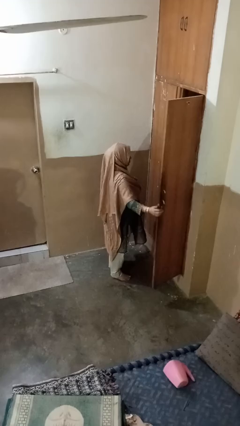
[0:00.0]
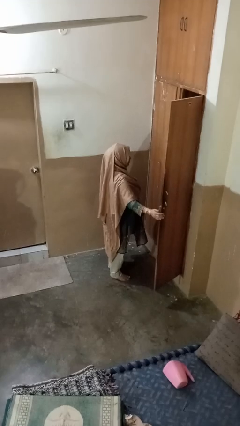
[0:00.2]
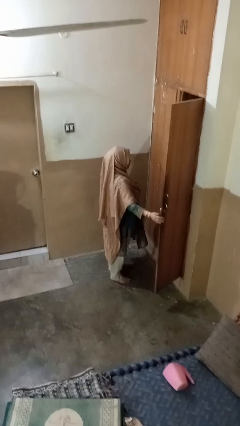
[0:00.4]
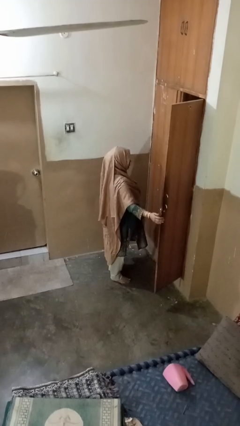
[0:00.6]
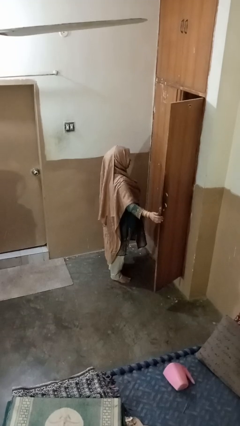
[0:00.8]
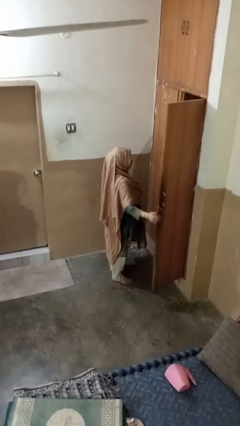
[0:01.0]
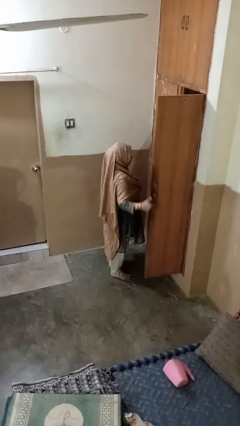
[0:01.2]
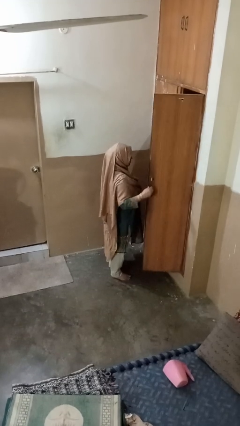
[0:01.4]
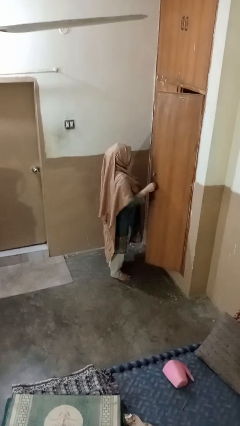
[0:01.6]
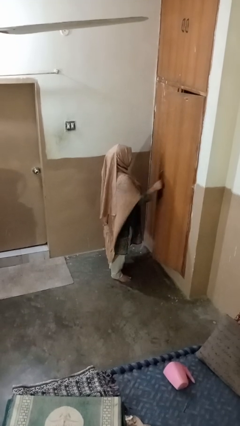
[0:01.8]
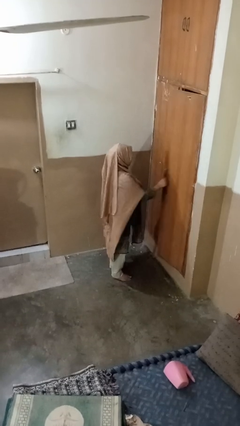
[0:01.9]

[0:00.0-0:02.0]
person closes closet door

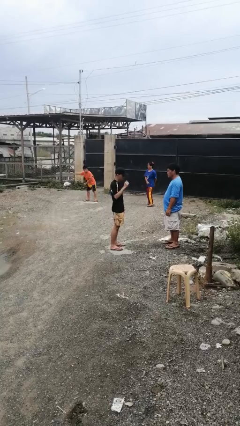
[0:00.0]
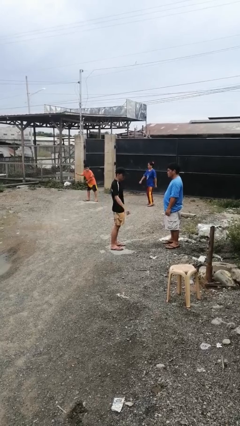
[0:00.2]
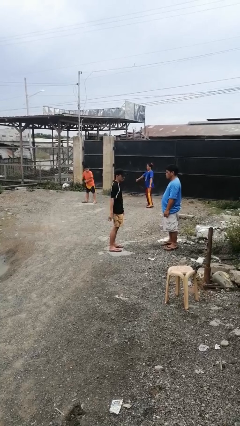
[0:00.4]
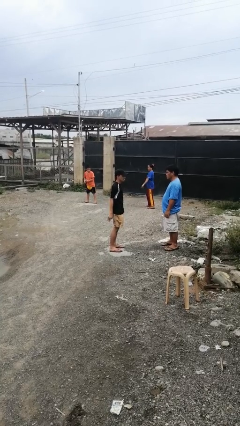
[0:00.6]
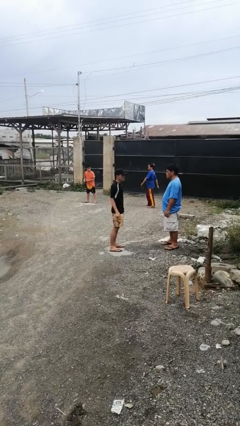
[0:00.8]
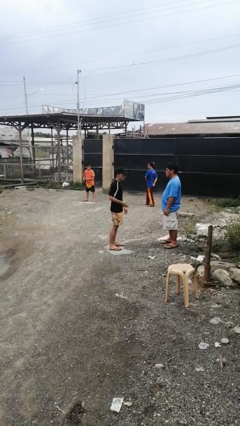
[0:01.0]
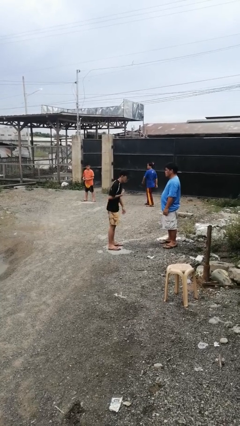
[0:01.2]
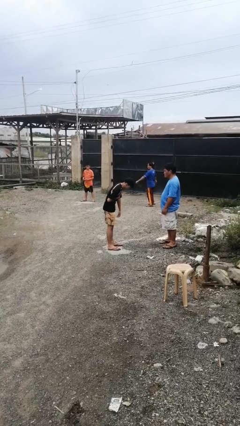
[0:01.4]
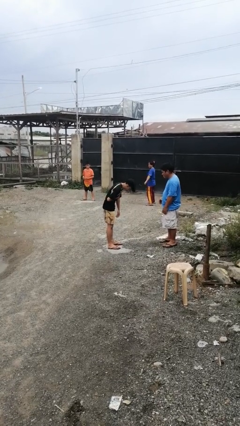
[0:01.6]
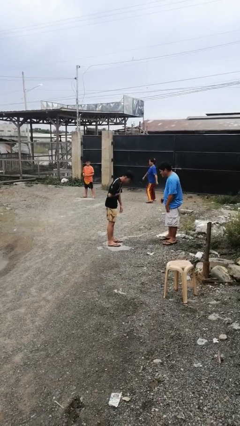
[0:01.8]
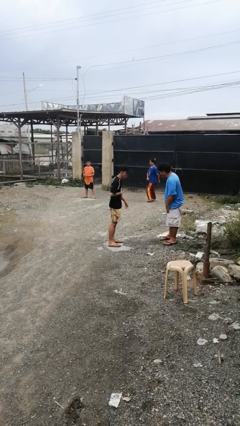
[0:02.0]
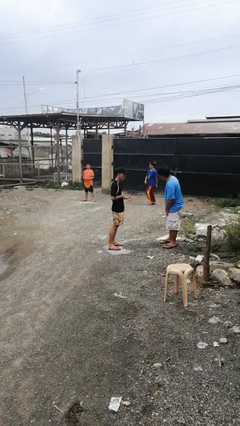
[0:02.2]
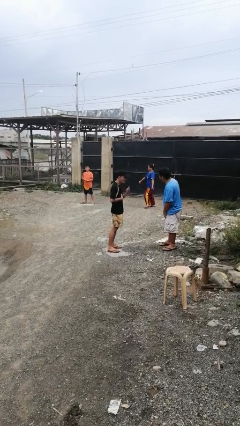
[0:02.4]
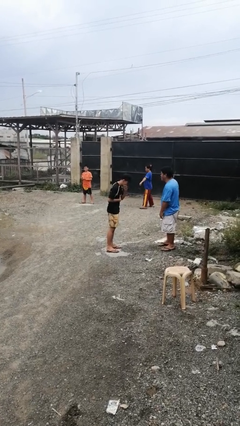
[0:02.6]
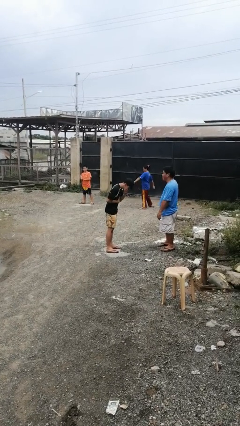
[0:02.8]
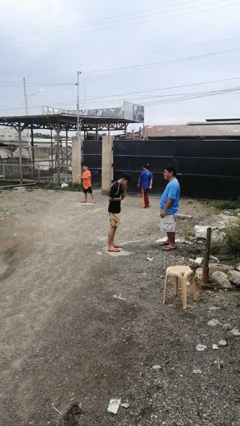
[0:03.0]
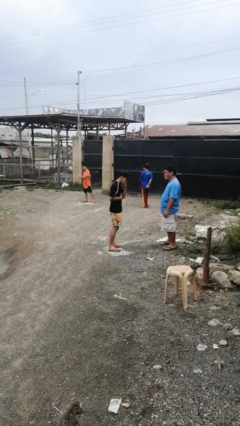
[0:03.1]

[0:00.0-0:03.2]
person laughs with person

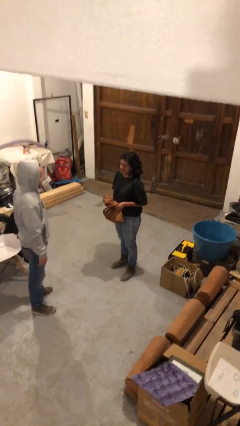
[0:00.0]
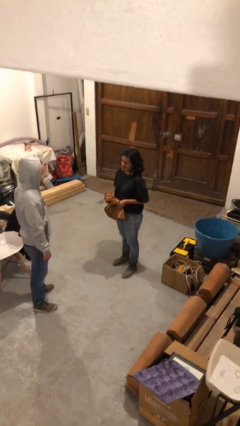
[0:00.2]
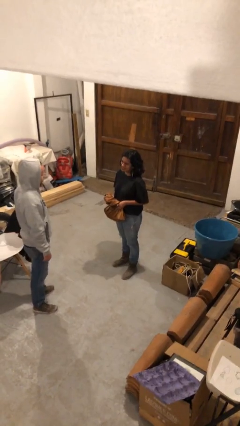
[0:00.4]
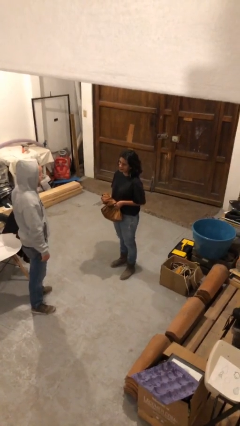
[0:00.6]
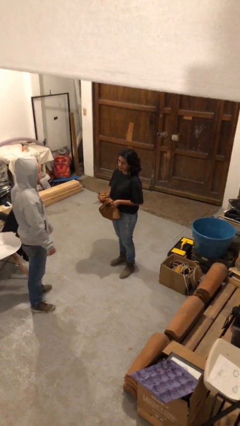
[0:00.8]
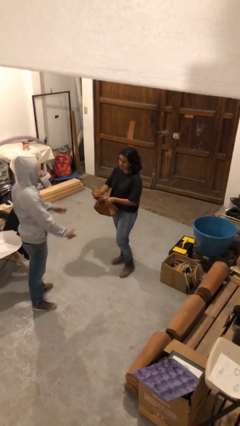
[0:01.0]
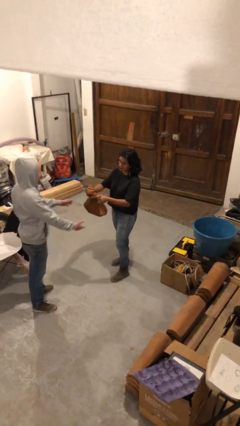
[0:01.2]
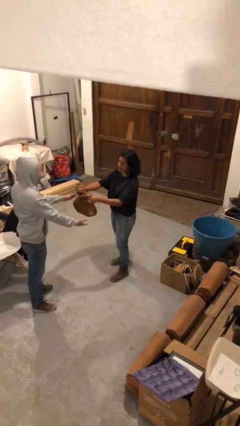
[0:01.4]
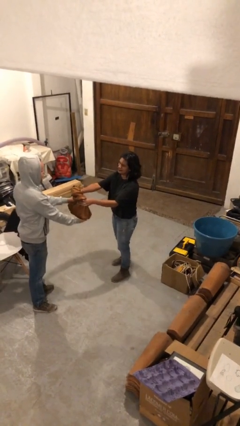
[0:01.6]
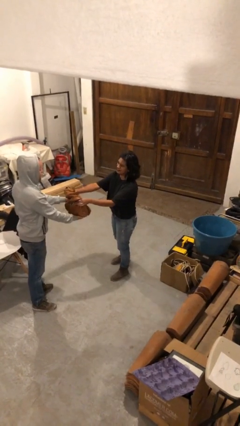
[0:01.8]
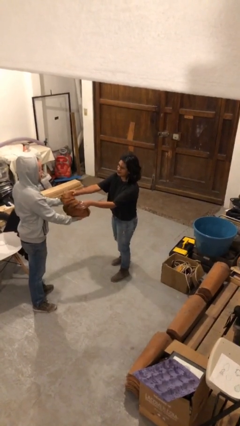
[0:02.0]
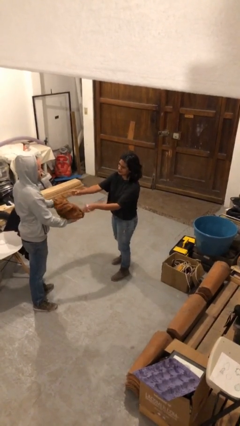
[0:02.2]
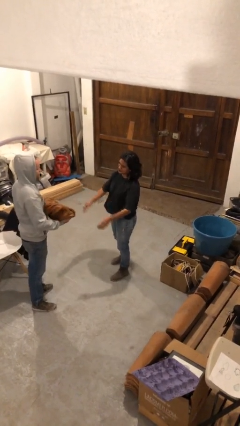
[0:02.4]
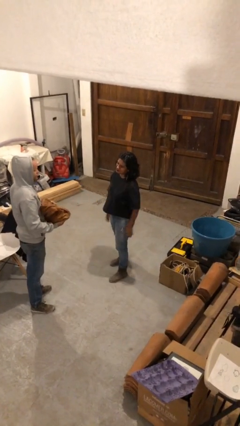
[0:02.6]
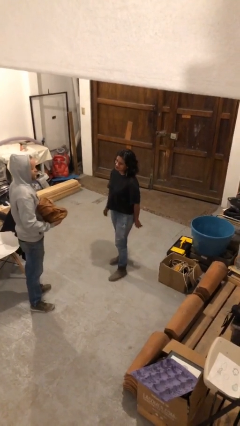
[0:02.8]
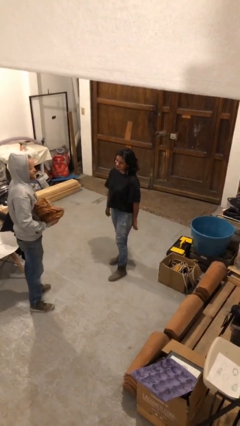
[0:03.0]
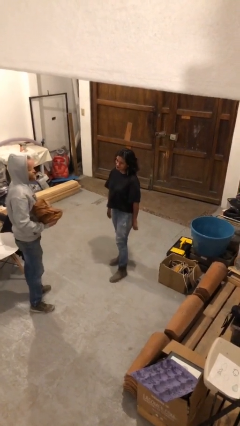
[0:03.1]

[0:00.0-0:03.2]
person transfers object to person

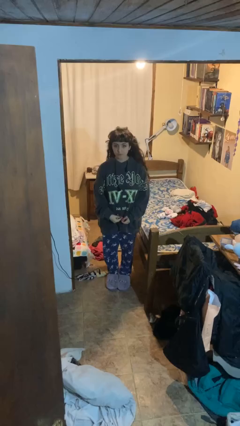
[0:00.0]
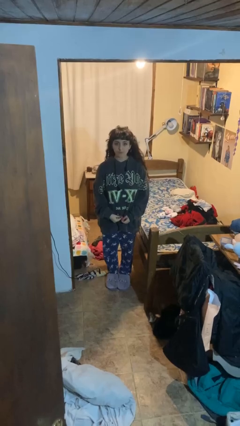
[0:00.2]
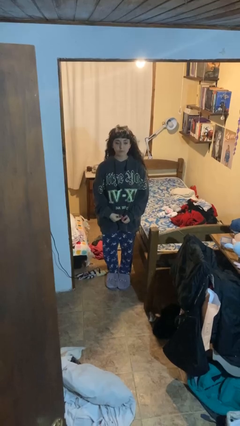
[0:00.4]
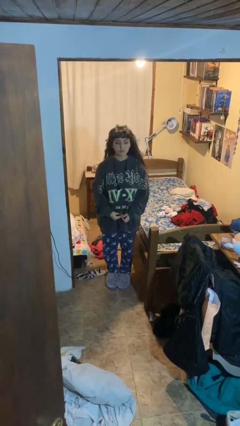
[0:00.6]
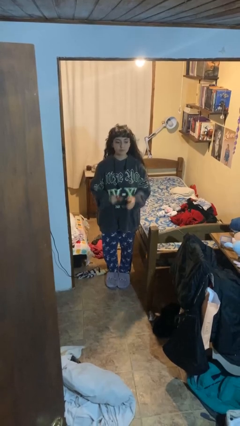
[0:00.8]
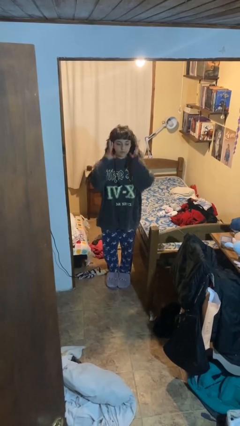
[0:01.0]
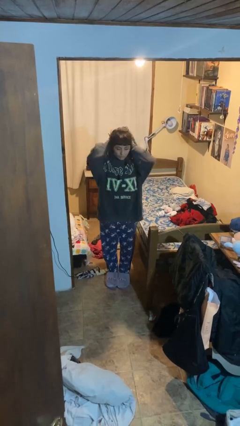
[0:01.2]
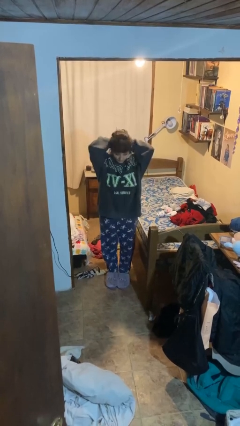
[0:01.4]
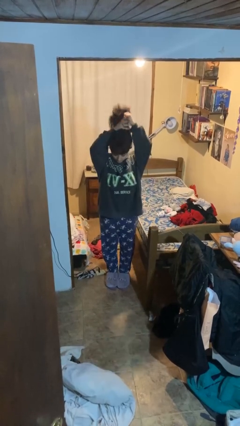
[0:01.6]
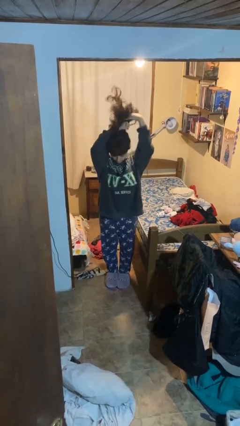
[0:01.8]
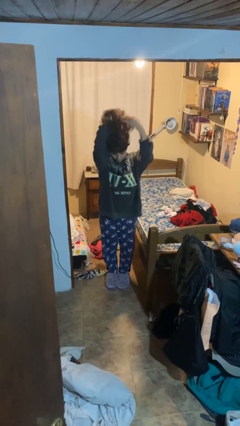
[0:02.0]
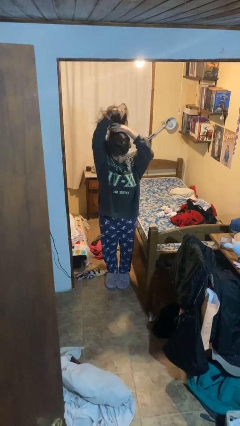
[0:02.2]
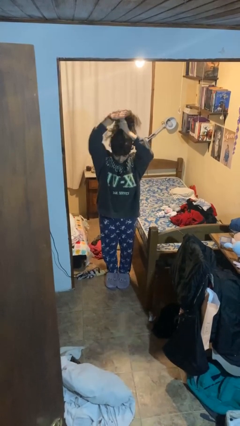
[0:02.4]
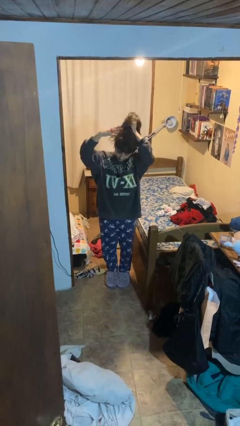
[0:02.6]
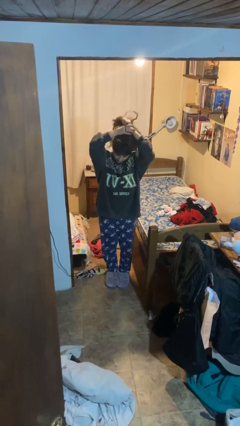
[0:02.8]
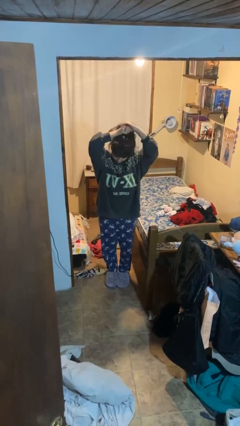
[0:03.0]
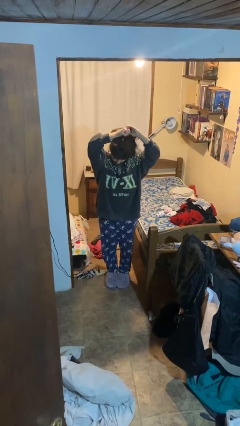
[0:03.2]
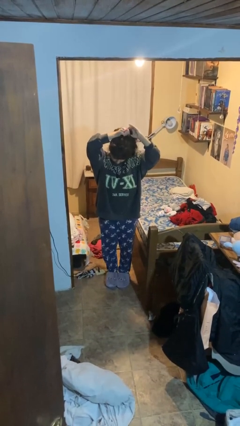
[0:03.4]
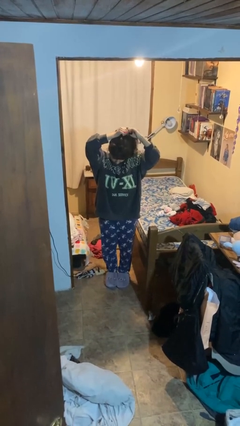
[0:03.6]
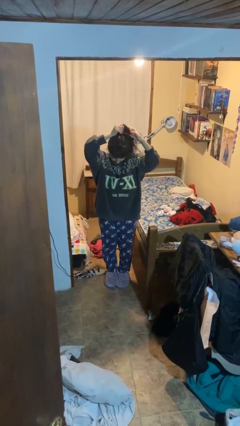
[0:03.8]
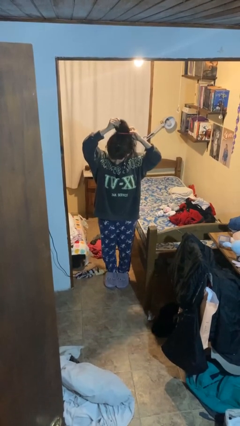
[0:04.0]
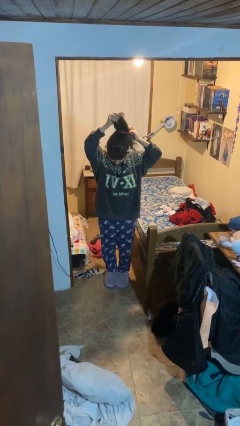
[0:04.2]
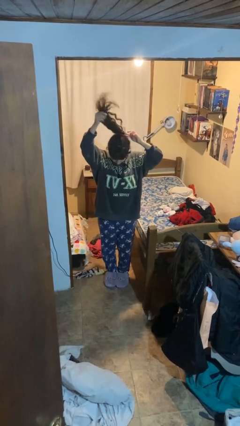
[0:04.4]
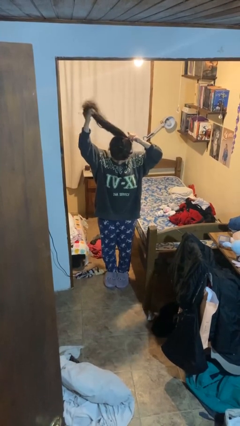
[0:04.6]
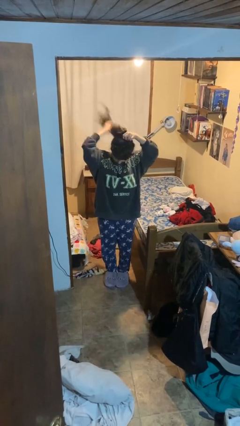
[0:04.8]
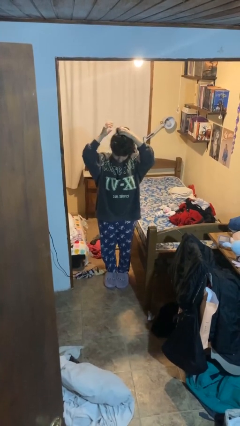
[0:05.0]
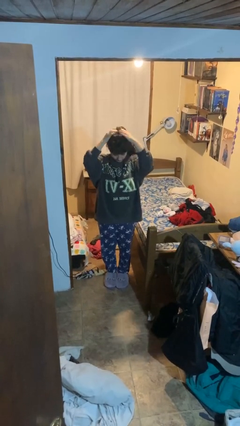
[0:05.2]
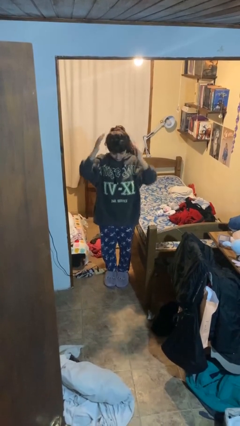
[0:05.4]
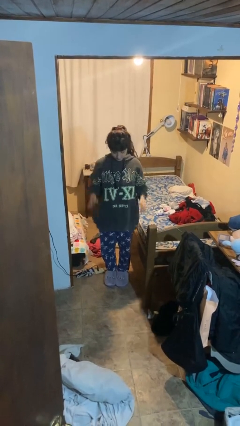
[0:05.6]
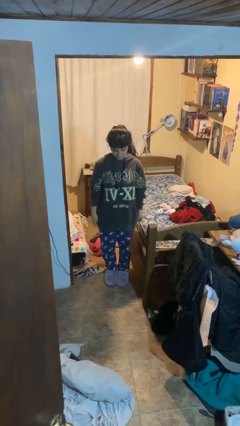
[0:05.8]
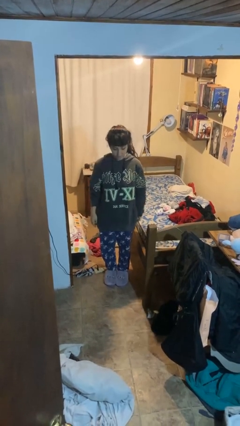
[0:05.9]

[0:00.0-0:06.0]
person puts hair in ponytail

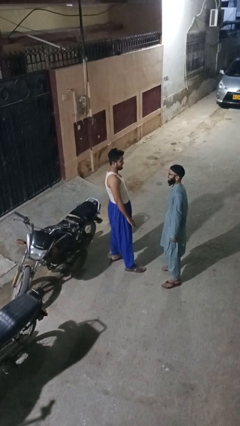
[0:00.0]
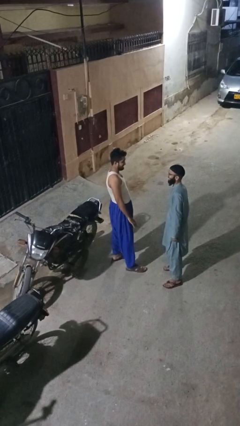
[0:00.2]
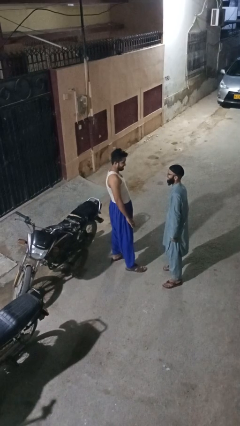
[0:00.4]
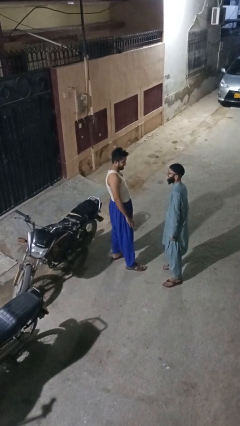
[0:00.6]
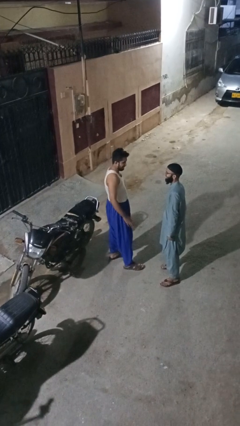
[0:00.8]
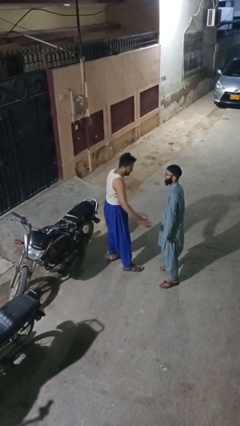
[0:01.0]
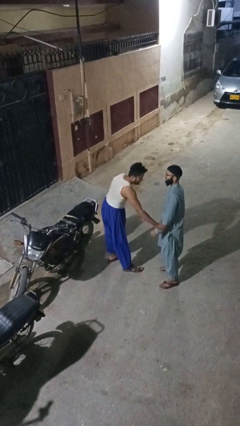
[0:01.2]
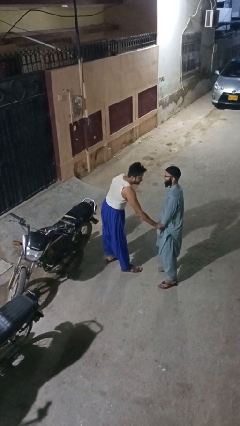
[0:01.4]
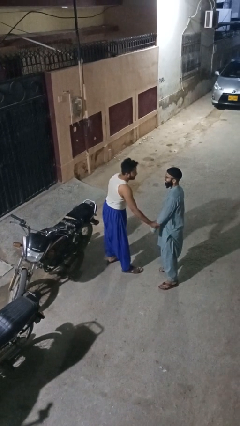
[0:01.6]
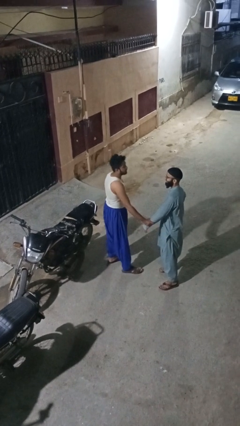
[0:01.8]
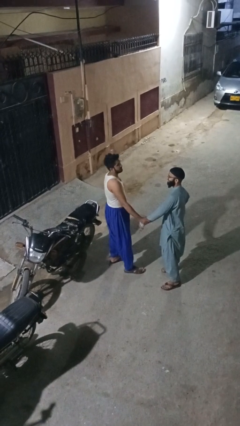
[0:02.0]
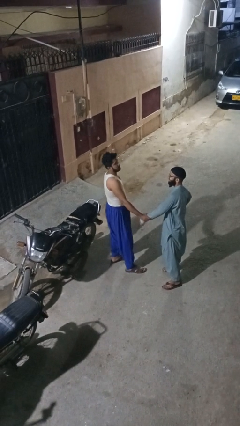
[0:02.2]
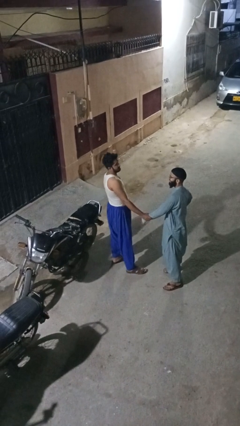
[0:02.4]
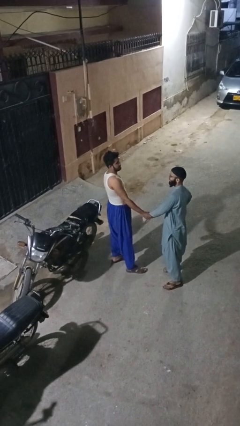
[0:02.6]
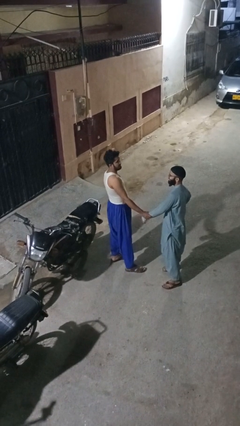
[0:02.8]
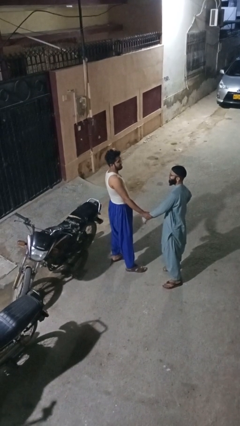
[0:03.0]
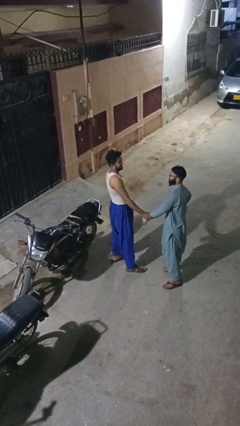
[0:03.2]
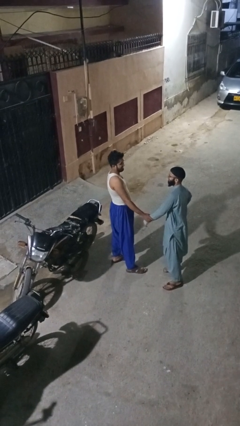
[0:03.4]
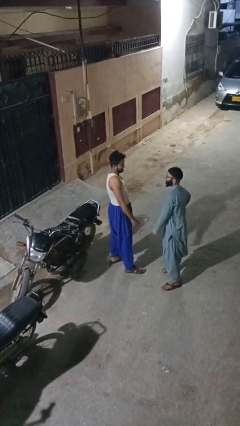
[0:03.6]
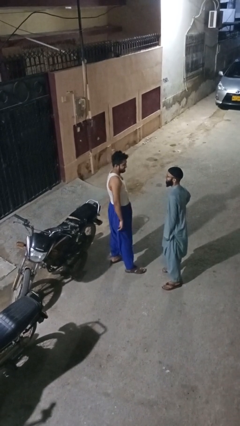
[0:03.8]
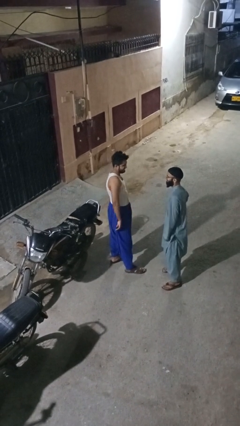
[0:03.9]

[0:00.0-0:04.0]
person grabs person by forearm
